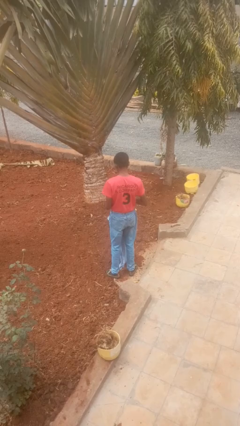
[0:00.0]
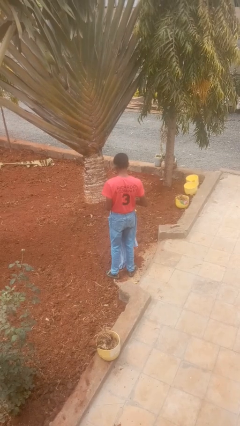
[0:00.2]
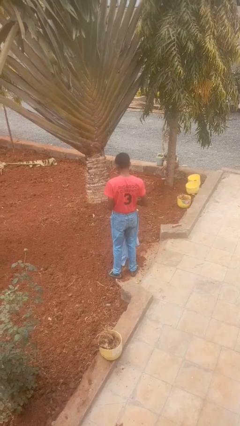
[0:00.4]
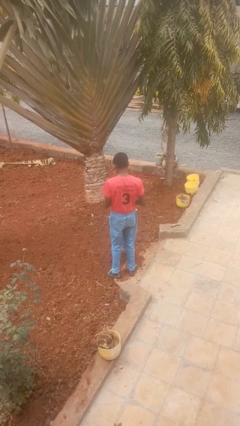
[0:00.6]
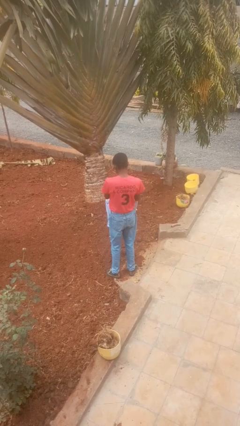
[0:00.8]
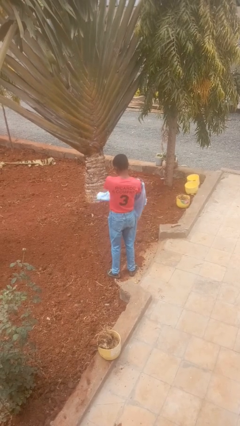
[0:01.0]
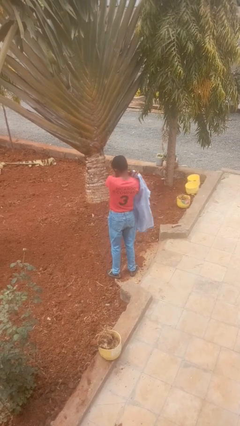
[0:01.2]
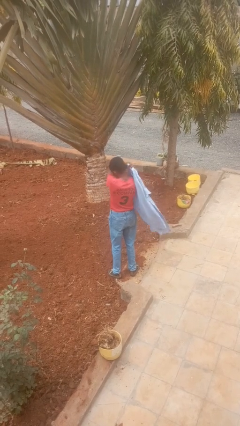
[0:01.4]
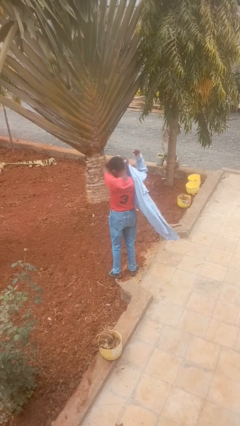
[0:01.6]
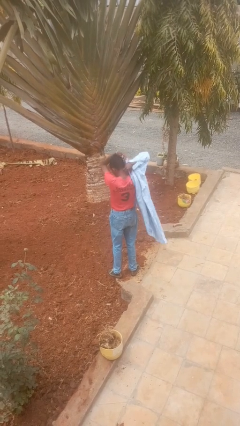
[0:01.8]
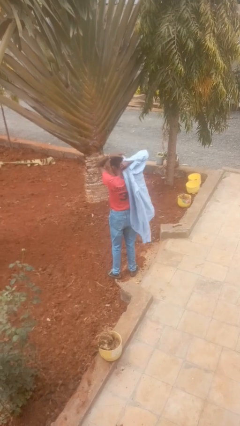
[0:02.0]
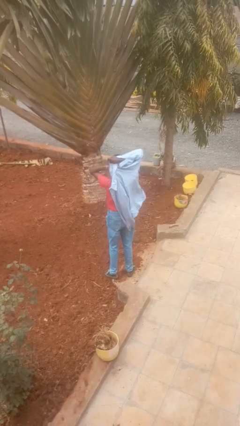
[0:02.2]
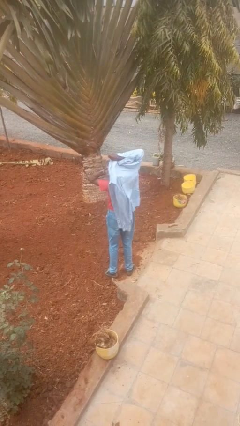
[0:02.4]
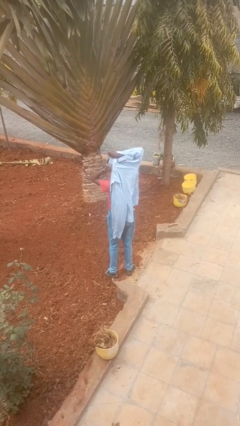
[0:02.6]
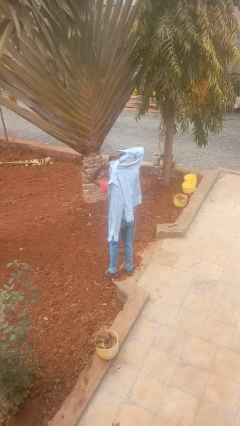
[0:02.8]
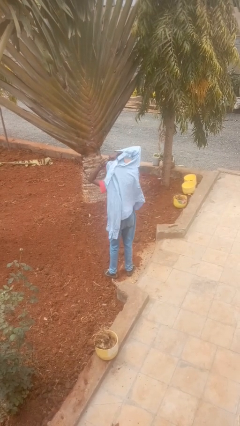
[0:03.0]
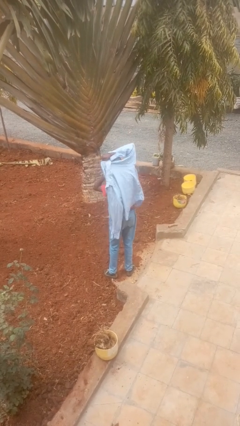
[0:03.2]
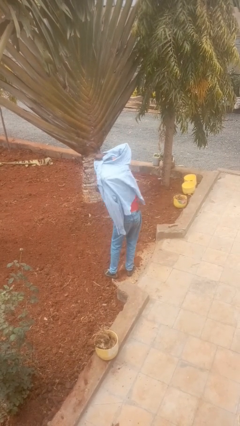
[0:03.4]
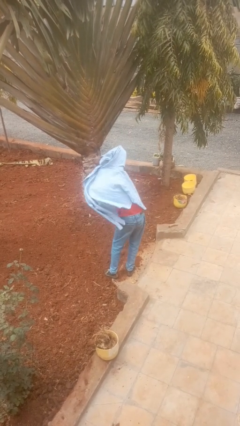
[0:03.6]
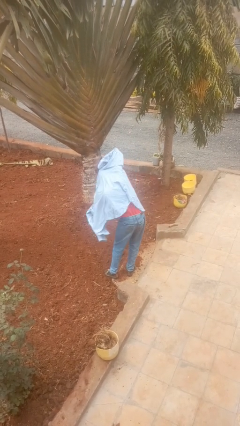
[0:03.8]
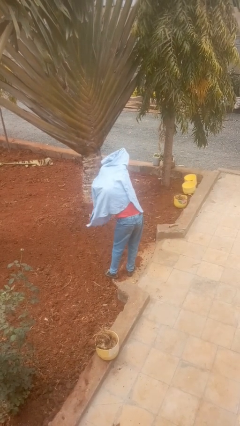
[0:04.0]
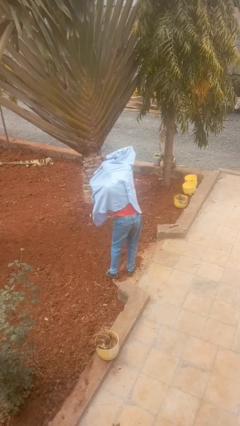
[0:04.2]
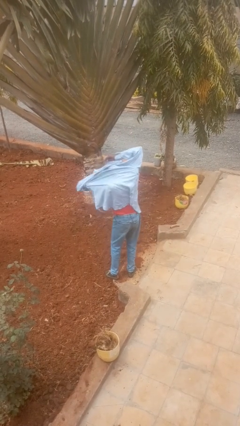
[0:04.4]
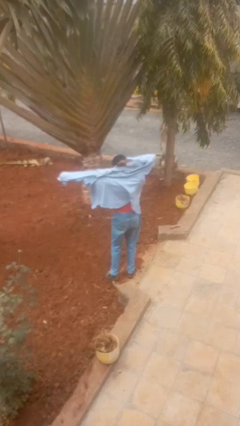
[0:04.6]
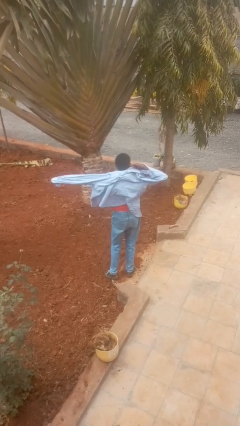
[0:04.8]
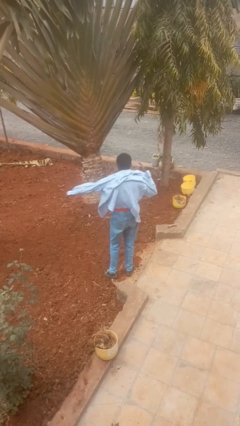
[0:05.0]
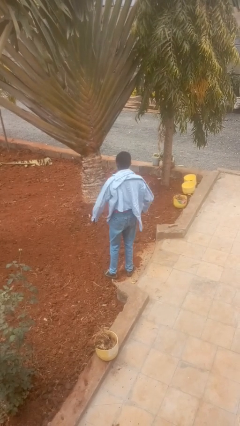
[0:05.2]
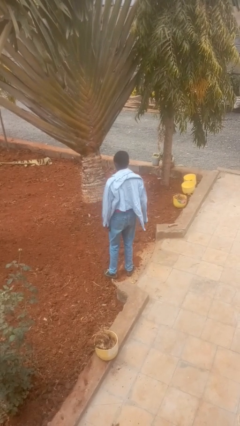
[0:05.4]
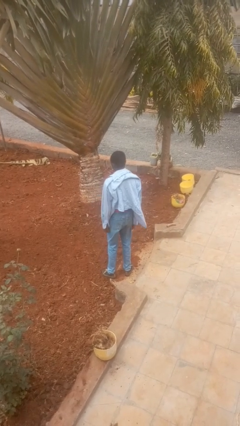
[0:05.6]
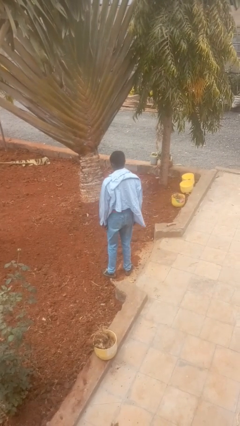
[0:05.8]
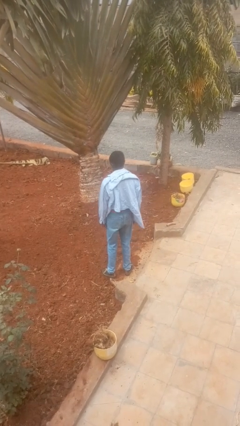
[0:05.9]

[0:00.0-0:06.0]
person puts on shirt

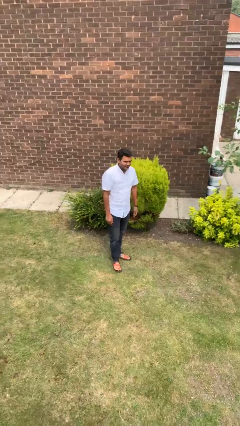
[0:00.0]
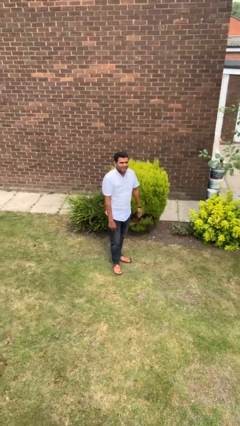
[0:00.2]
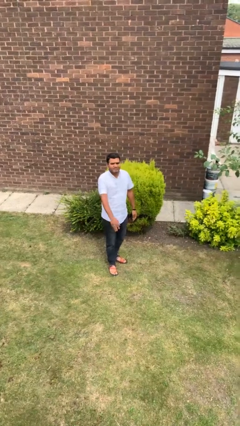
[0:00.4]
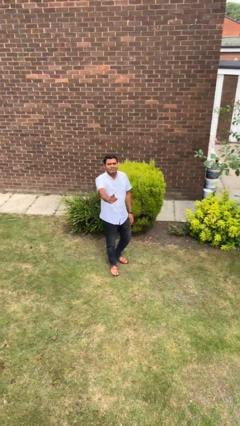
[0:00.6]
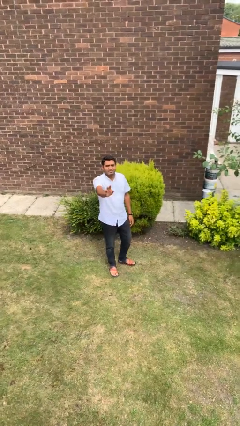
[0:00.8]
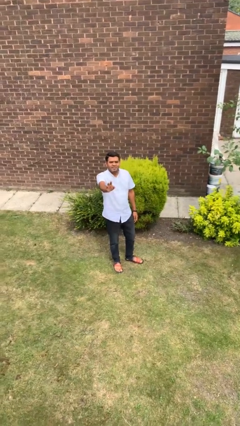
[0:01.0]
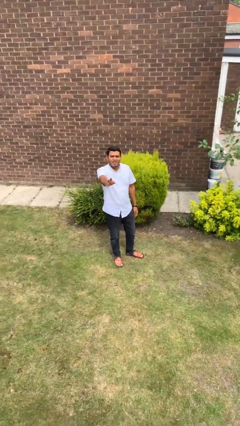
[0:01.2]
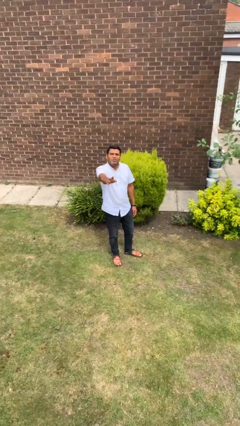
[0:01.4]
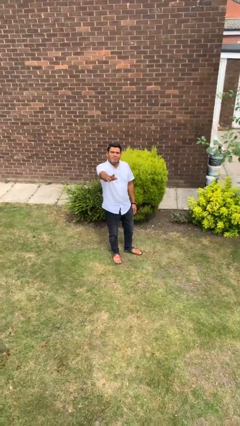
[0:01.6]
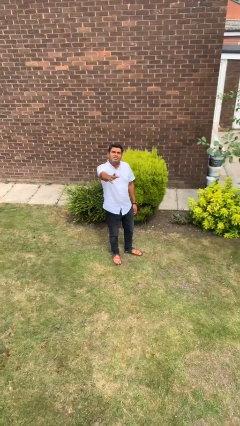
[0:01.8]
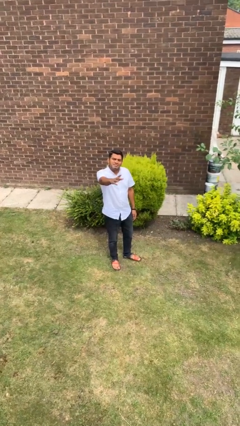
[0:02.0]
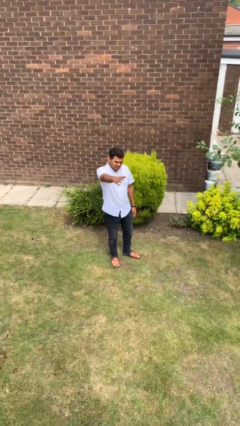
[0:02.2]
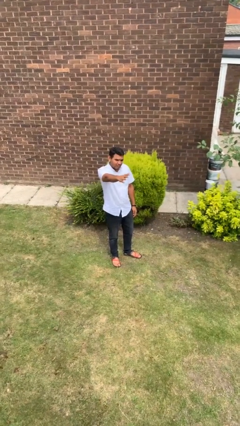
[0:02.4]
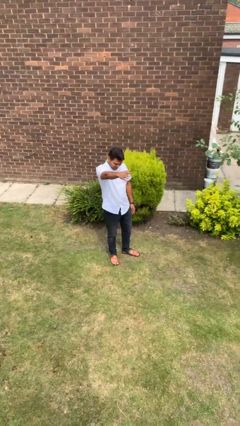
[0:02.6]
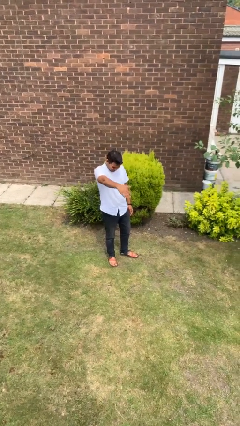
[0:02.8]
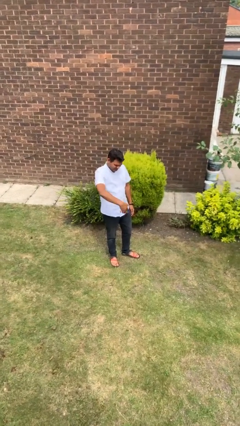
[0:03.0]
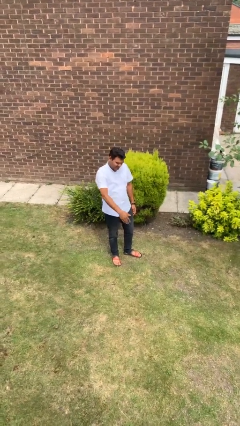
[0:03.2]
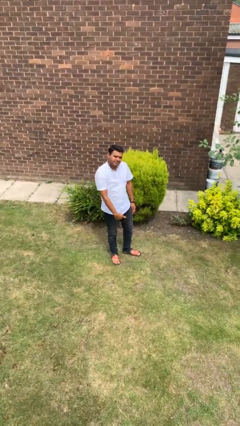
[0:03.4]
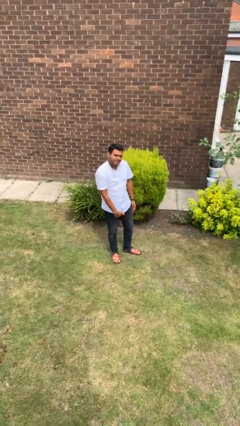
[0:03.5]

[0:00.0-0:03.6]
person gestures come here

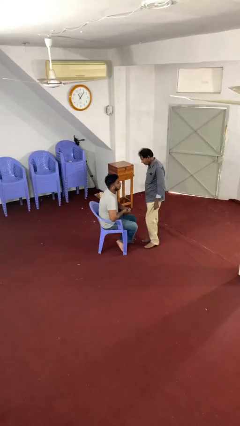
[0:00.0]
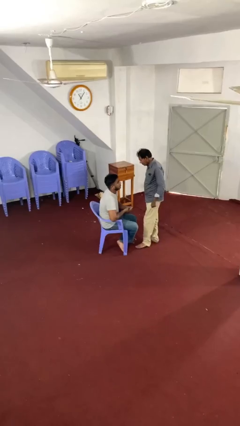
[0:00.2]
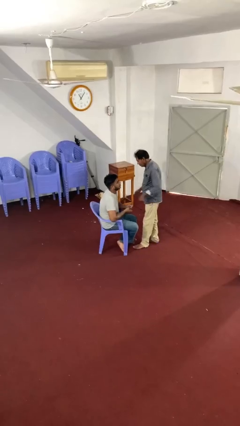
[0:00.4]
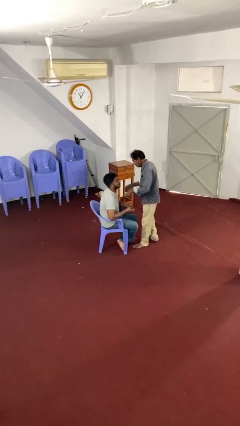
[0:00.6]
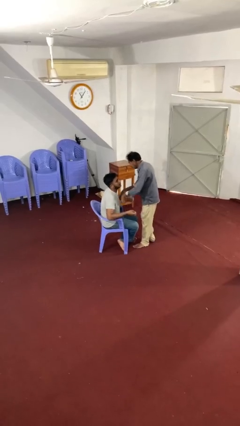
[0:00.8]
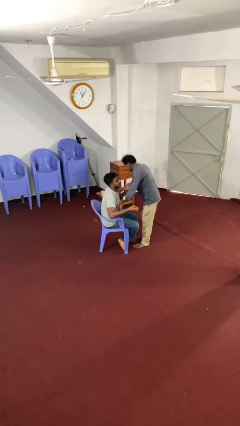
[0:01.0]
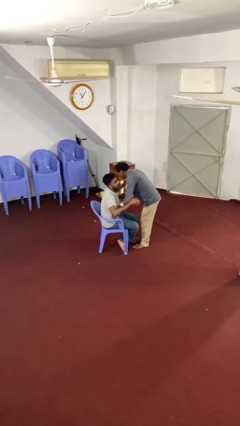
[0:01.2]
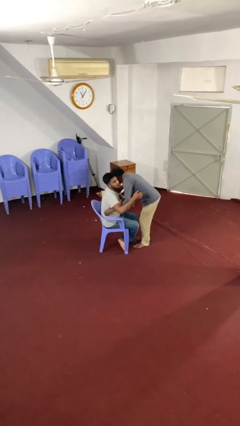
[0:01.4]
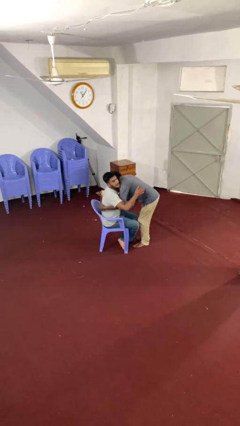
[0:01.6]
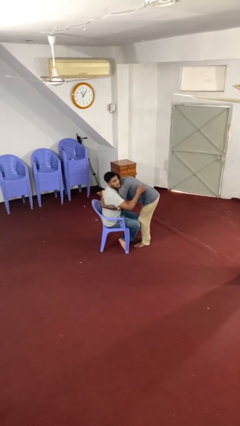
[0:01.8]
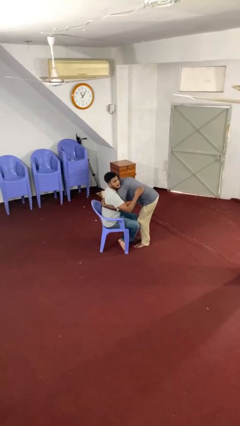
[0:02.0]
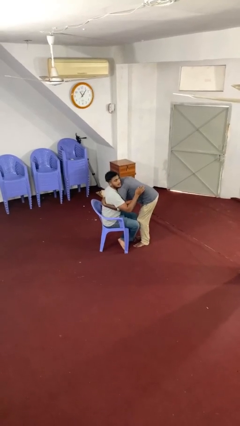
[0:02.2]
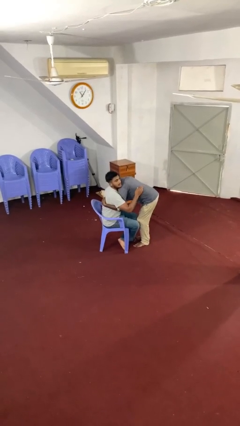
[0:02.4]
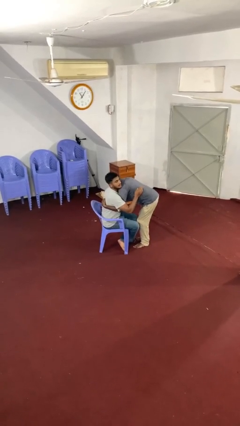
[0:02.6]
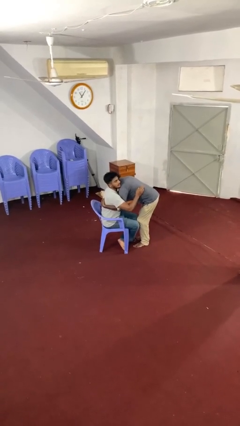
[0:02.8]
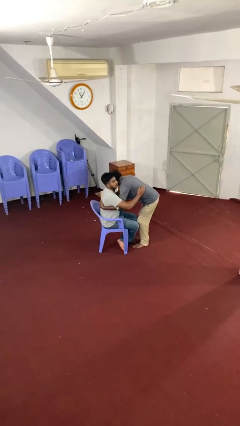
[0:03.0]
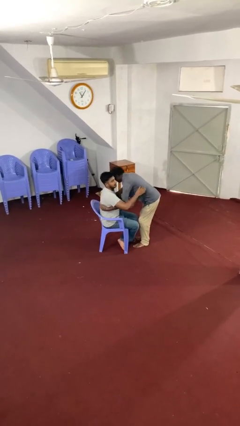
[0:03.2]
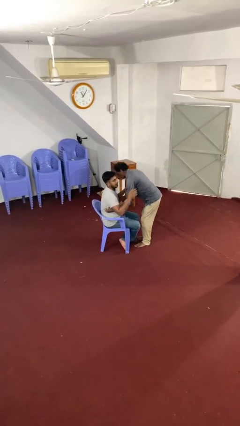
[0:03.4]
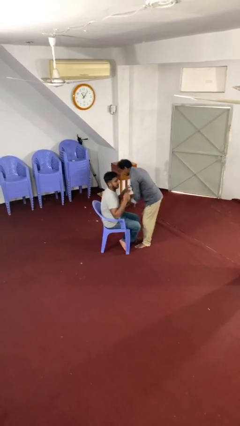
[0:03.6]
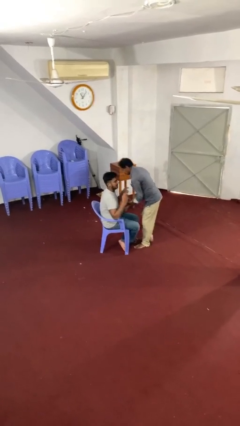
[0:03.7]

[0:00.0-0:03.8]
person embraces person

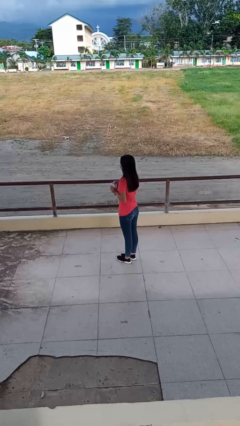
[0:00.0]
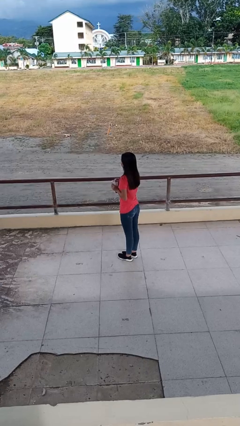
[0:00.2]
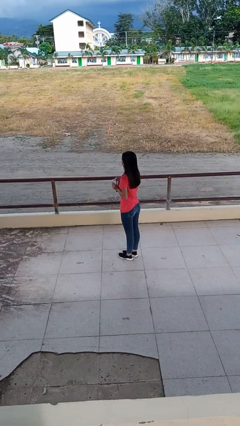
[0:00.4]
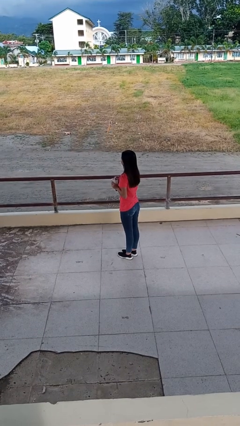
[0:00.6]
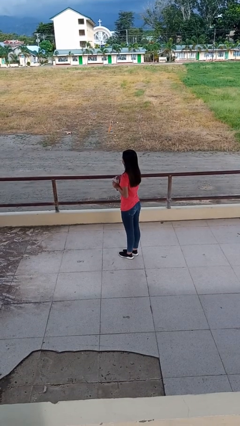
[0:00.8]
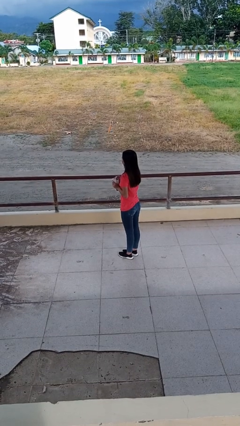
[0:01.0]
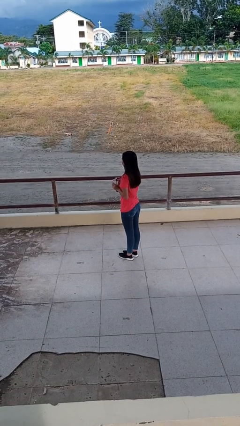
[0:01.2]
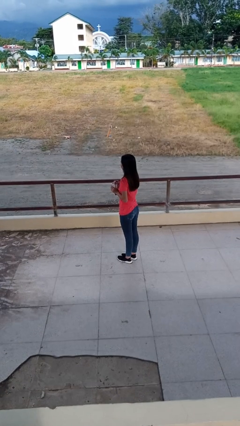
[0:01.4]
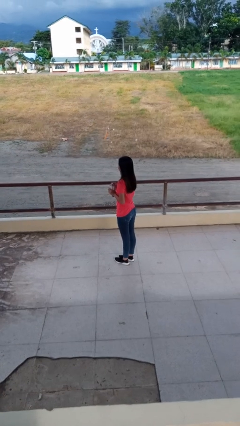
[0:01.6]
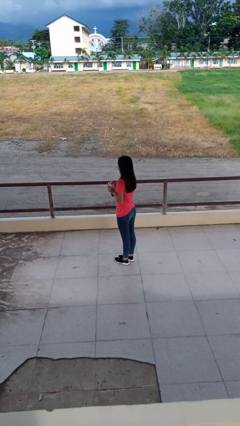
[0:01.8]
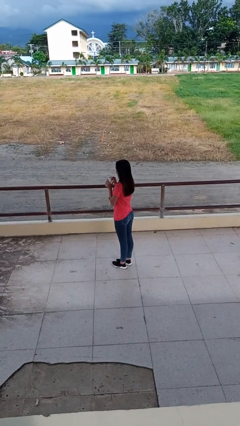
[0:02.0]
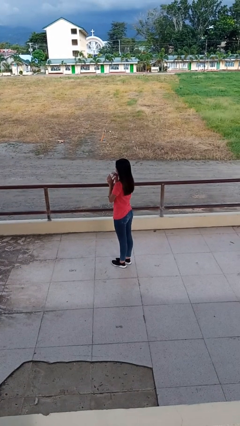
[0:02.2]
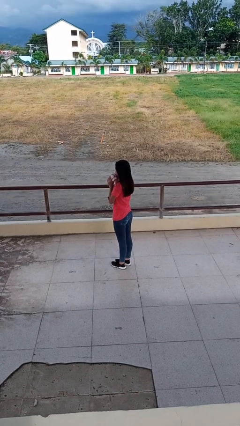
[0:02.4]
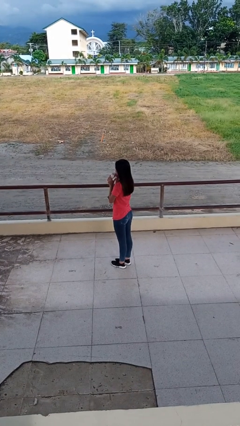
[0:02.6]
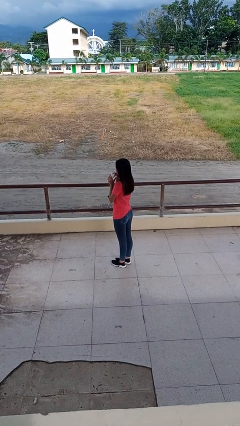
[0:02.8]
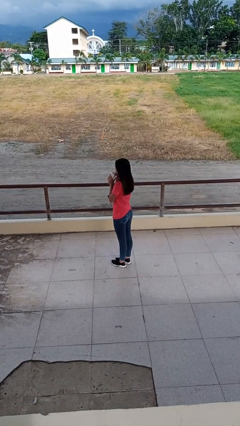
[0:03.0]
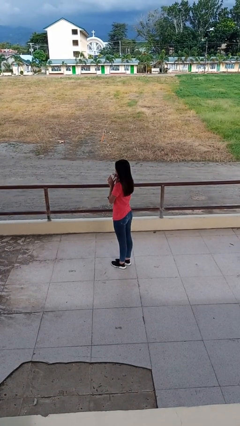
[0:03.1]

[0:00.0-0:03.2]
person drinks from straw

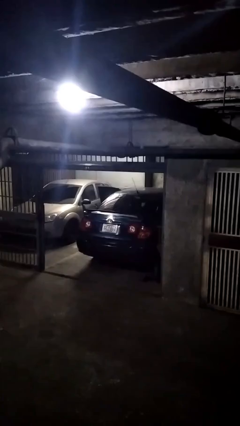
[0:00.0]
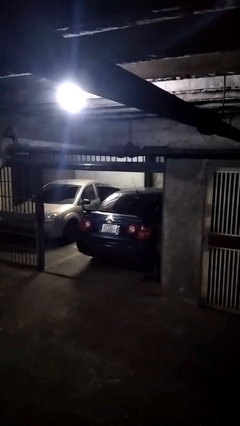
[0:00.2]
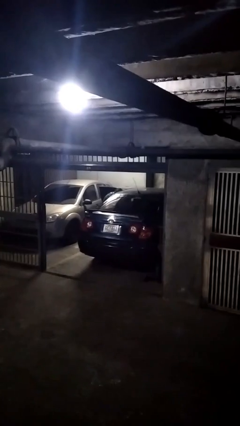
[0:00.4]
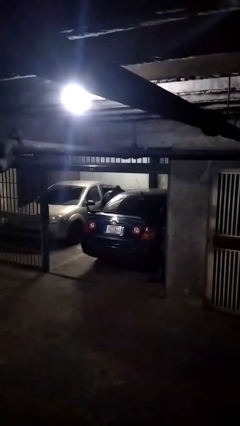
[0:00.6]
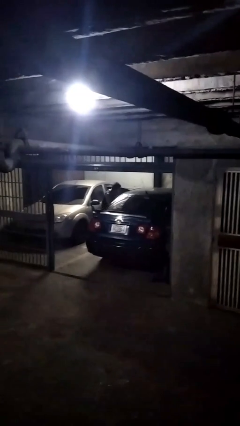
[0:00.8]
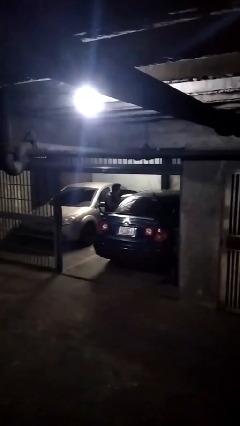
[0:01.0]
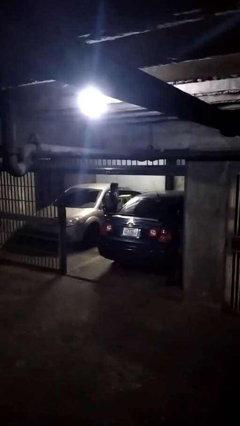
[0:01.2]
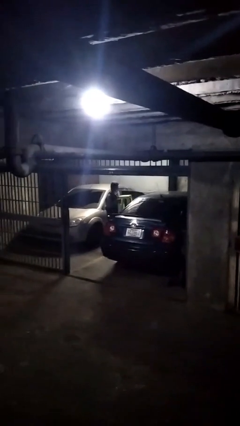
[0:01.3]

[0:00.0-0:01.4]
person unloads car
